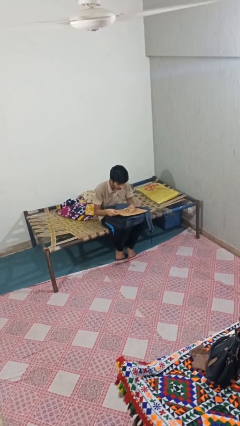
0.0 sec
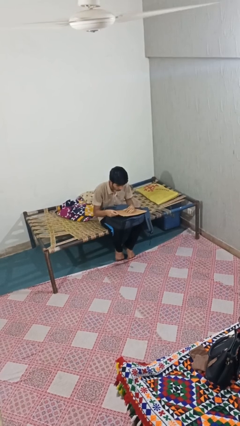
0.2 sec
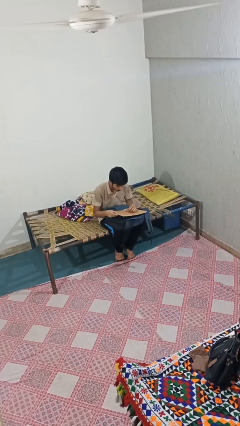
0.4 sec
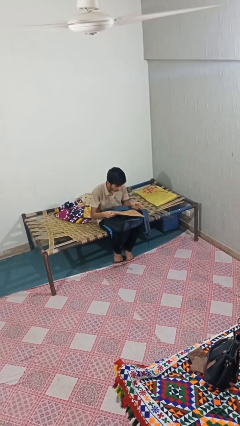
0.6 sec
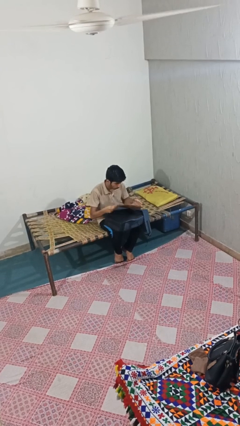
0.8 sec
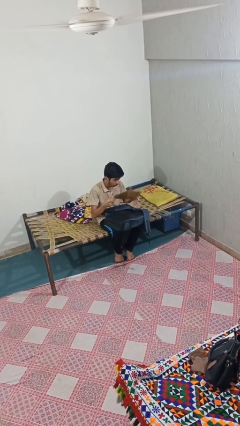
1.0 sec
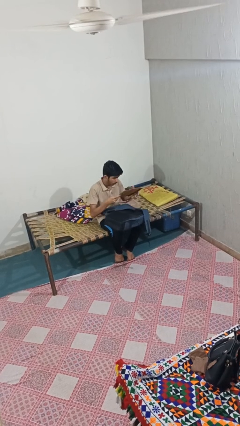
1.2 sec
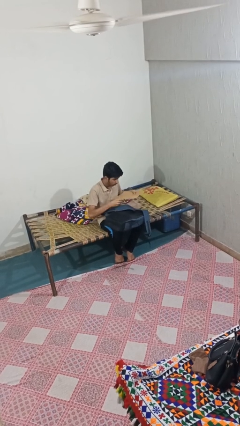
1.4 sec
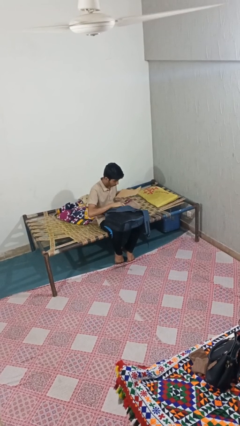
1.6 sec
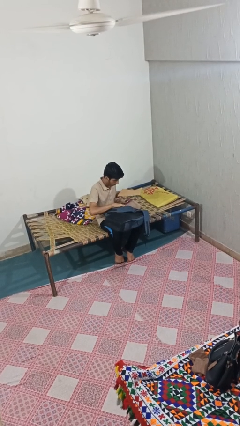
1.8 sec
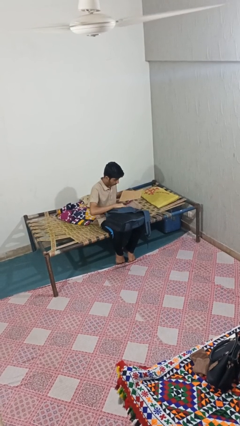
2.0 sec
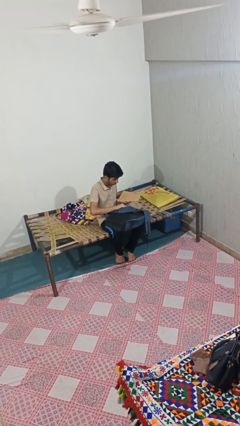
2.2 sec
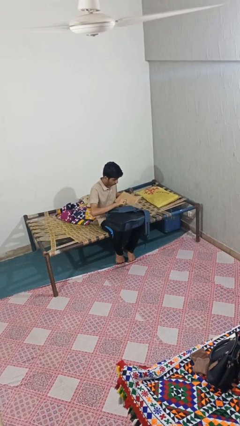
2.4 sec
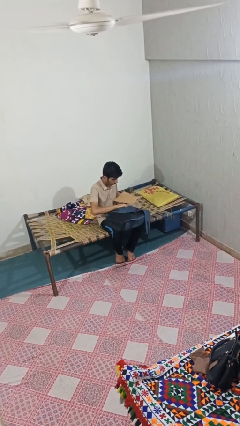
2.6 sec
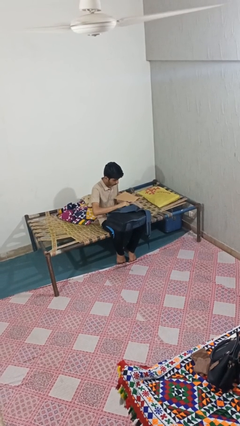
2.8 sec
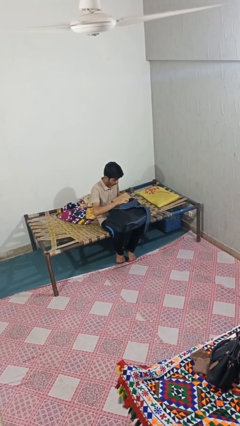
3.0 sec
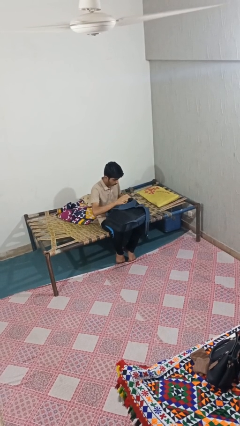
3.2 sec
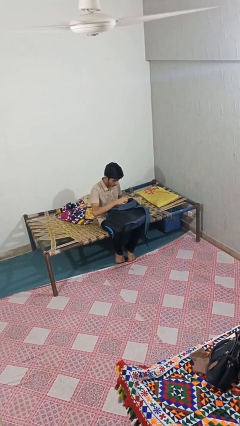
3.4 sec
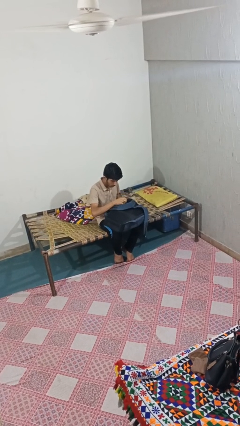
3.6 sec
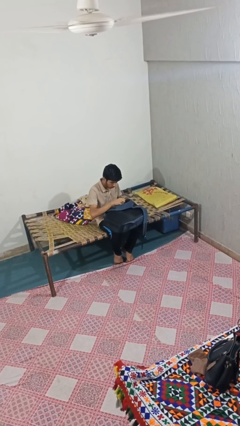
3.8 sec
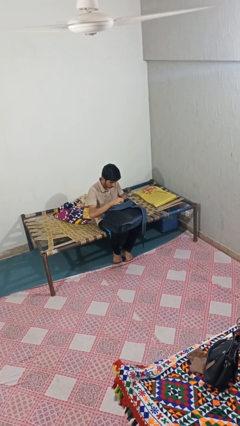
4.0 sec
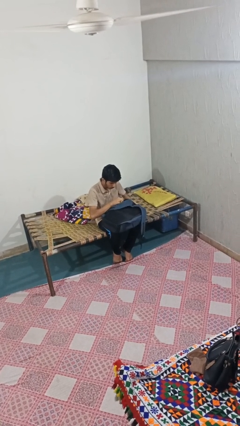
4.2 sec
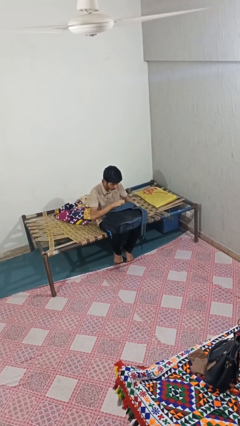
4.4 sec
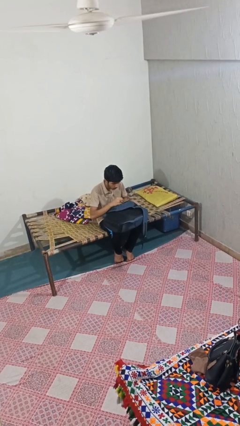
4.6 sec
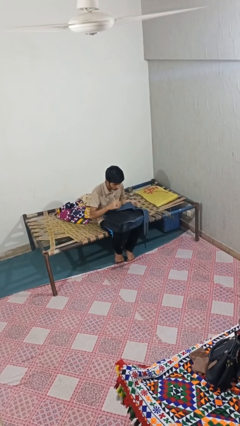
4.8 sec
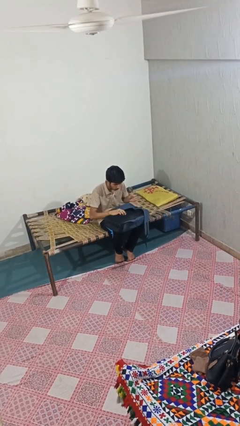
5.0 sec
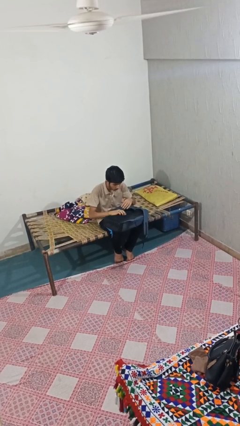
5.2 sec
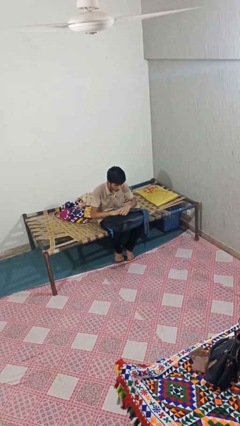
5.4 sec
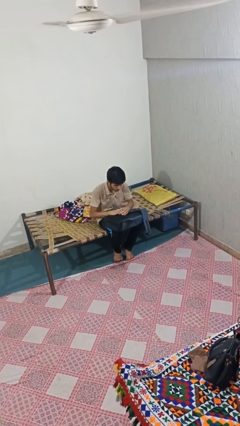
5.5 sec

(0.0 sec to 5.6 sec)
person puts object into backpack

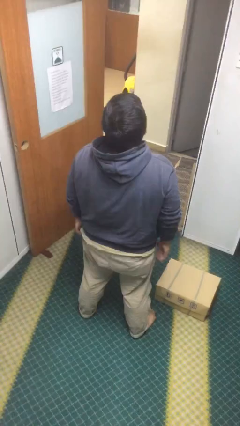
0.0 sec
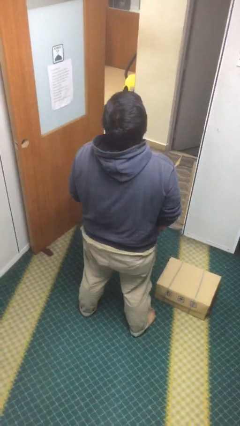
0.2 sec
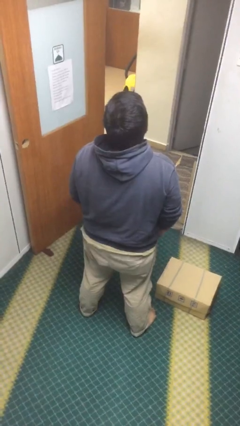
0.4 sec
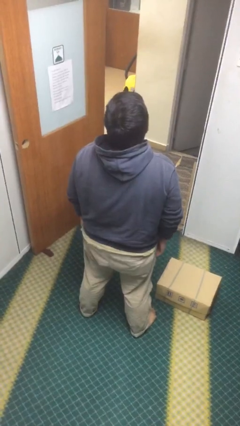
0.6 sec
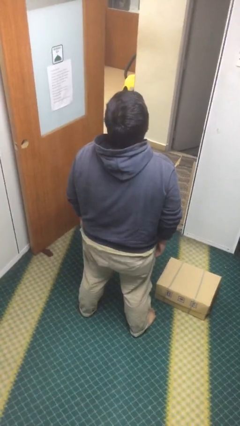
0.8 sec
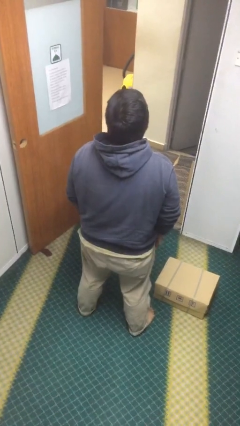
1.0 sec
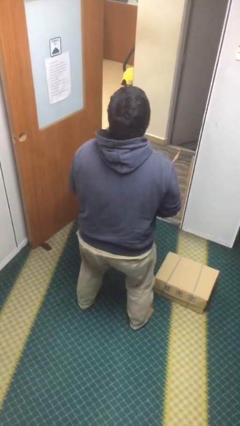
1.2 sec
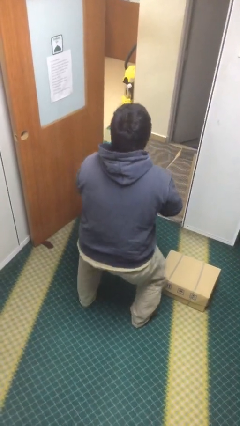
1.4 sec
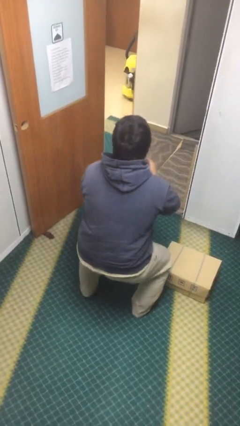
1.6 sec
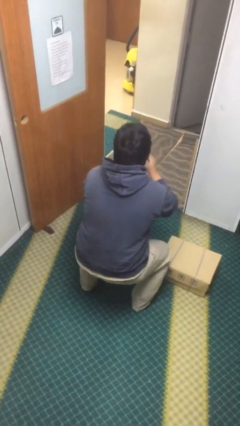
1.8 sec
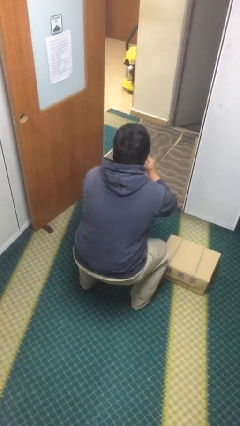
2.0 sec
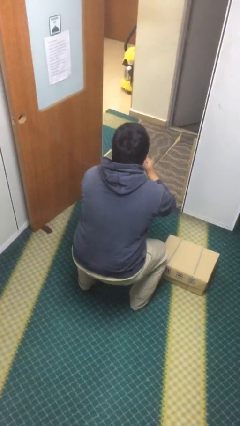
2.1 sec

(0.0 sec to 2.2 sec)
person squats

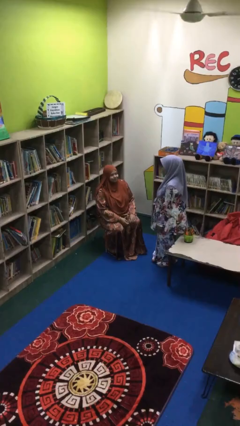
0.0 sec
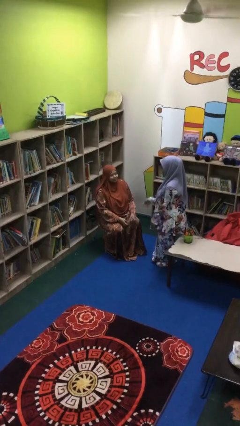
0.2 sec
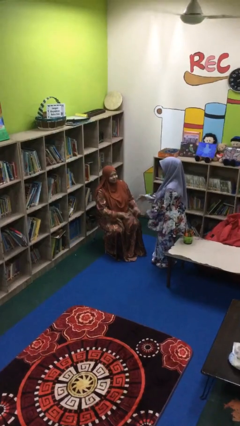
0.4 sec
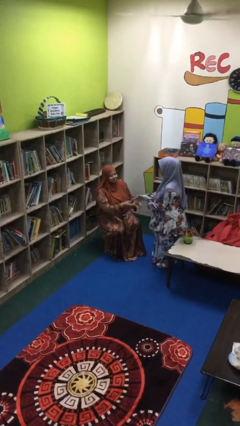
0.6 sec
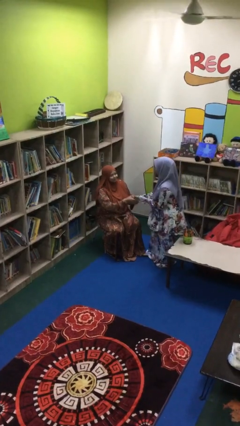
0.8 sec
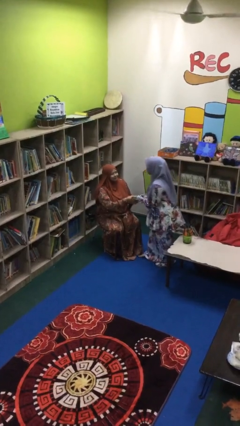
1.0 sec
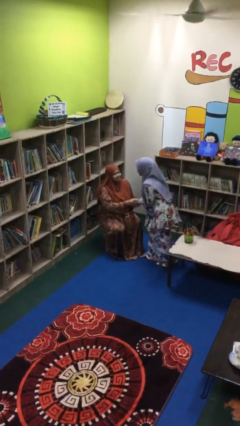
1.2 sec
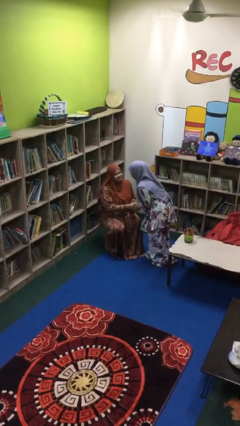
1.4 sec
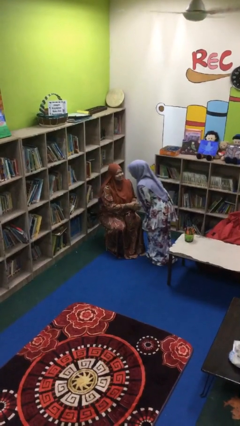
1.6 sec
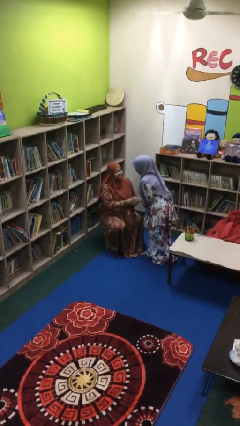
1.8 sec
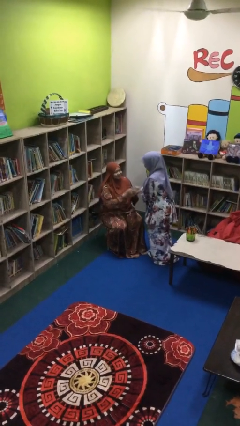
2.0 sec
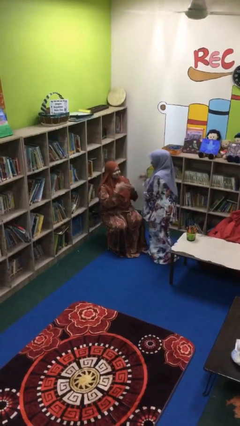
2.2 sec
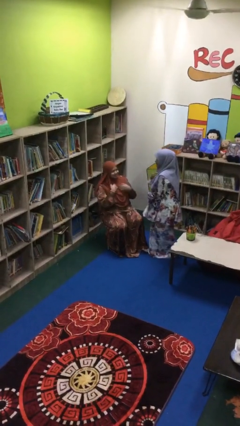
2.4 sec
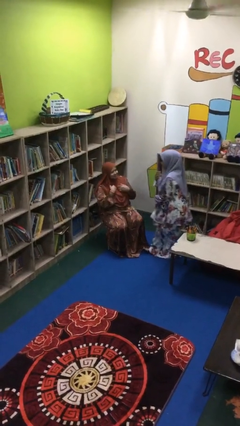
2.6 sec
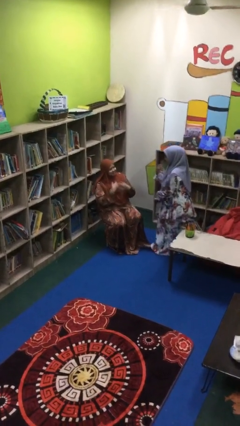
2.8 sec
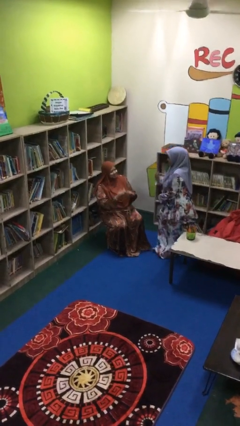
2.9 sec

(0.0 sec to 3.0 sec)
person shakes hand

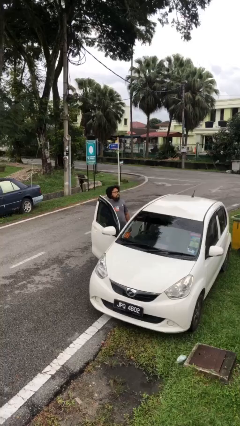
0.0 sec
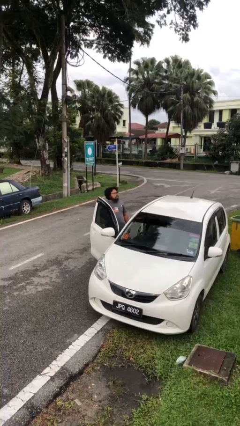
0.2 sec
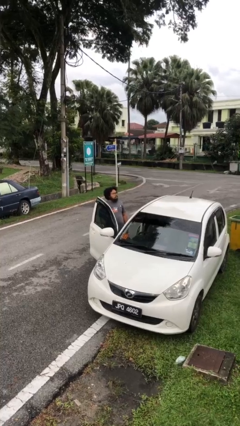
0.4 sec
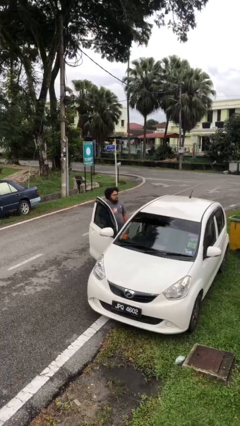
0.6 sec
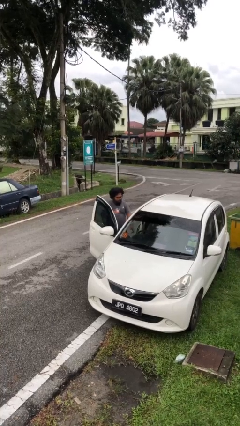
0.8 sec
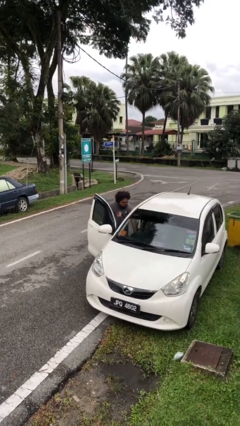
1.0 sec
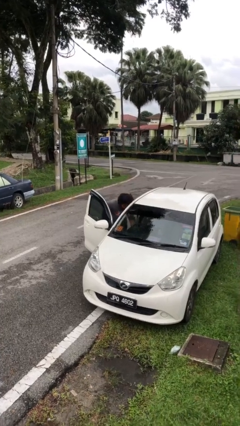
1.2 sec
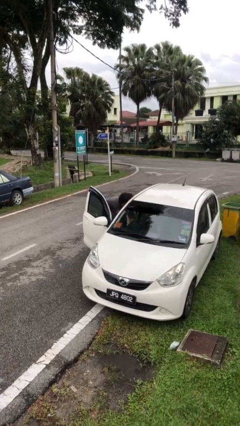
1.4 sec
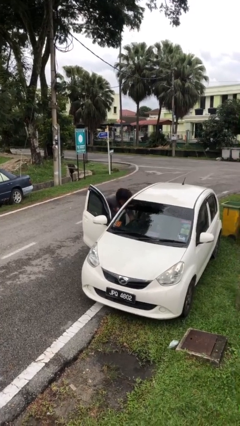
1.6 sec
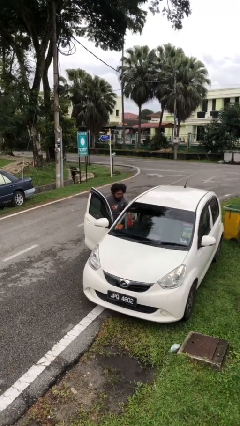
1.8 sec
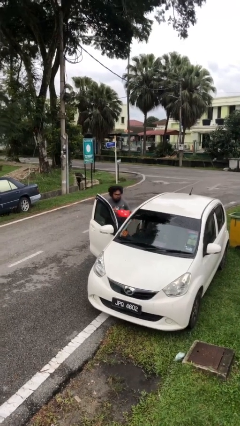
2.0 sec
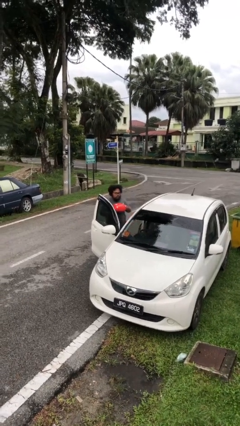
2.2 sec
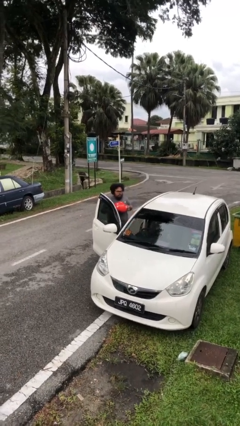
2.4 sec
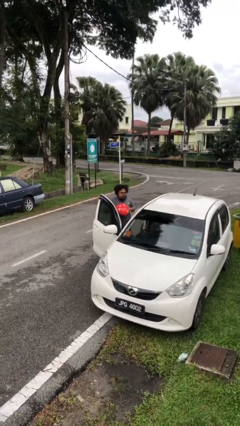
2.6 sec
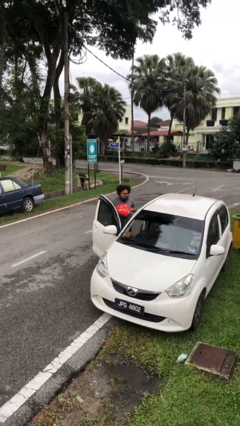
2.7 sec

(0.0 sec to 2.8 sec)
person unloads car

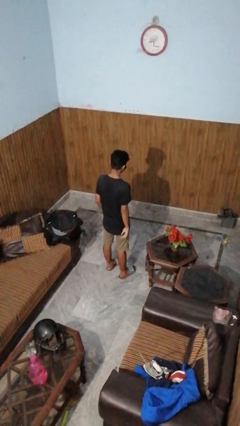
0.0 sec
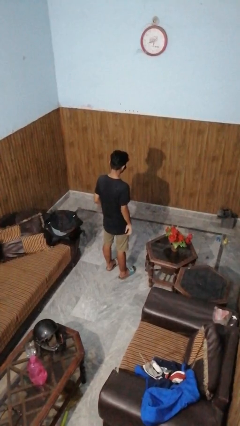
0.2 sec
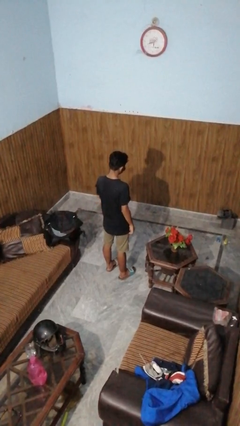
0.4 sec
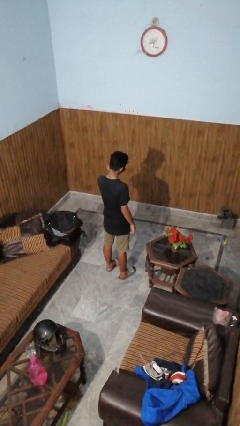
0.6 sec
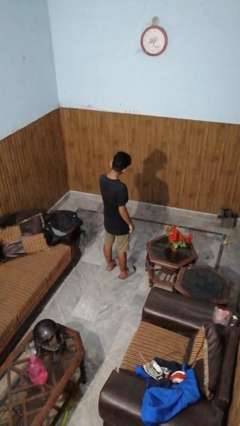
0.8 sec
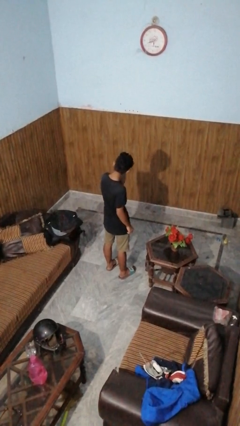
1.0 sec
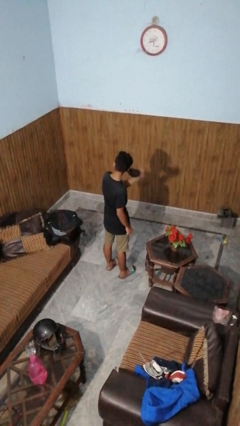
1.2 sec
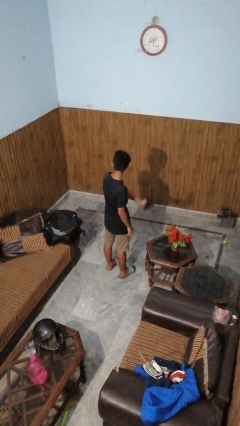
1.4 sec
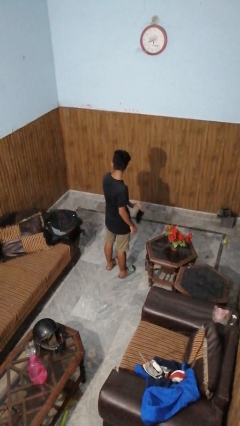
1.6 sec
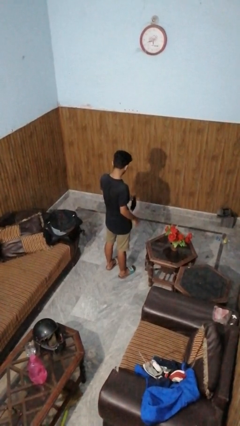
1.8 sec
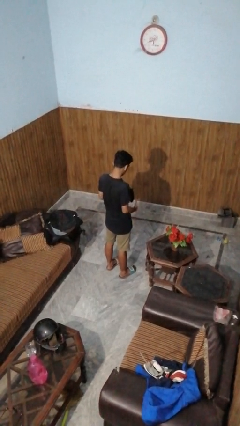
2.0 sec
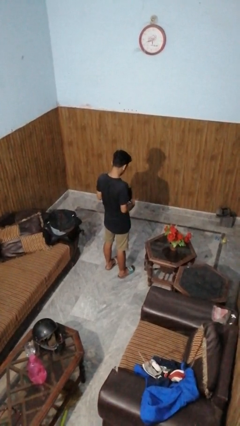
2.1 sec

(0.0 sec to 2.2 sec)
person takes off facemask

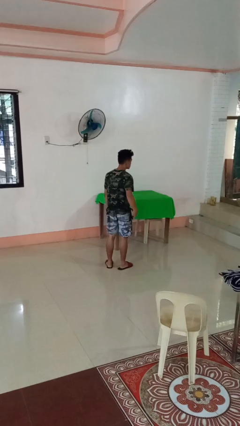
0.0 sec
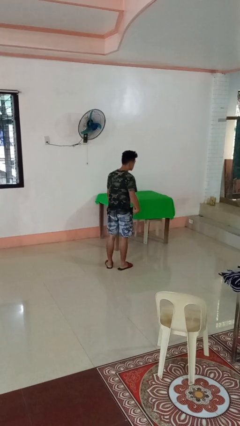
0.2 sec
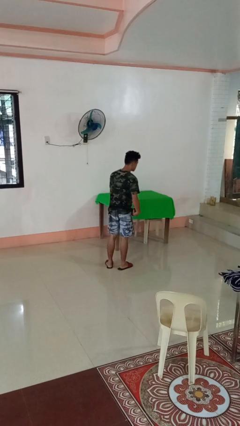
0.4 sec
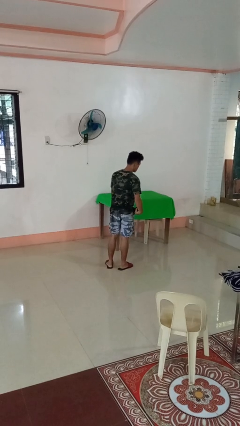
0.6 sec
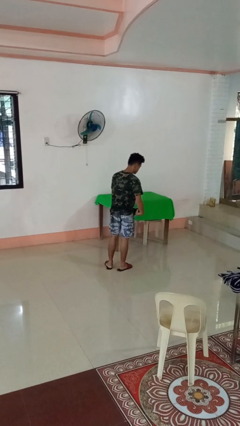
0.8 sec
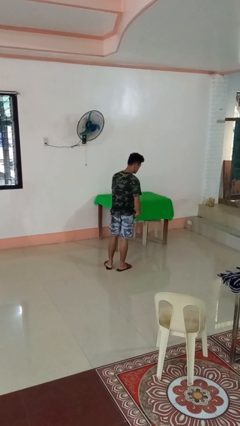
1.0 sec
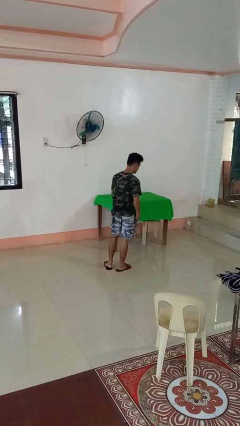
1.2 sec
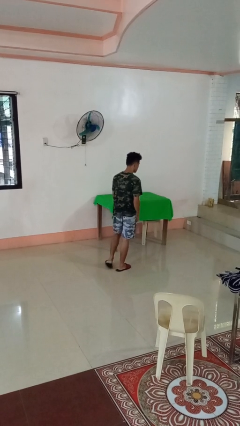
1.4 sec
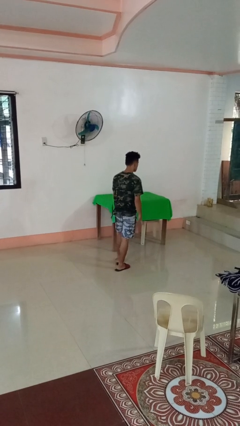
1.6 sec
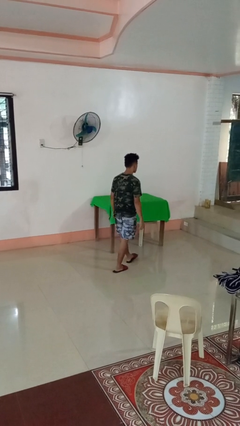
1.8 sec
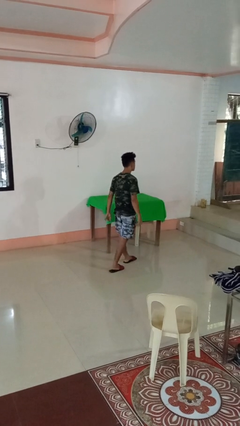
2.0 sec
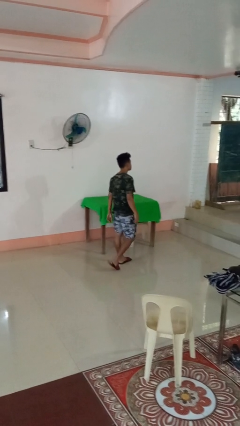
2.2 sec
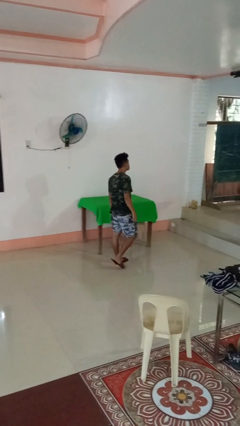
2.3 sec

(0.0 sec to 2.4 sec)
person puts phone into pocket
